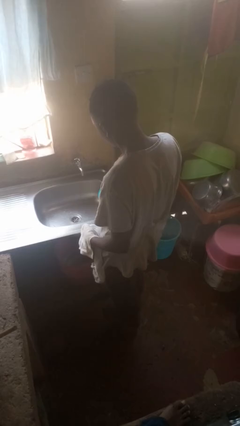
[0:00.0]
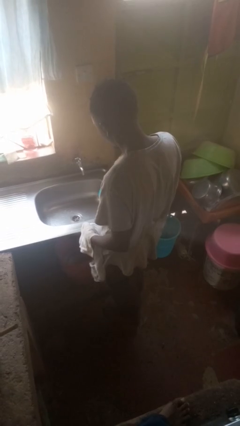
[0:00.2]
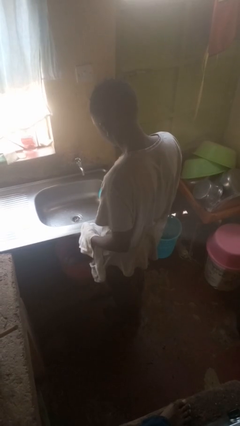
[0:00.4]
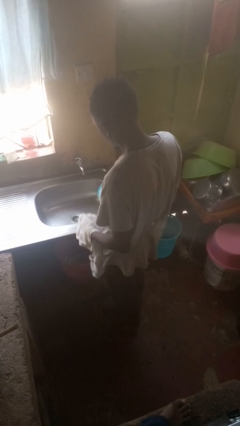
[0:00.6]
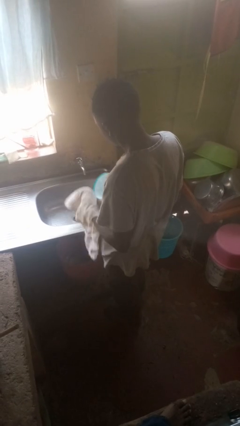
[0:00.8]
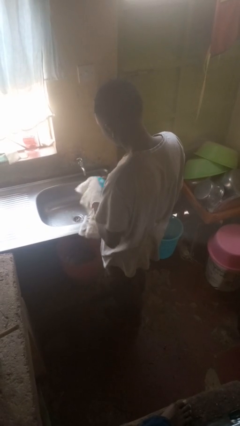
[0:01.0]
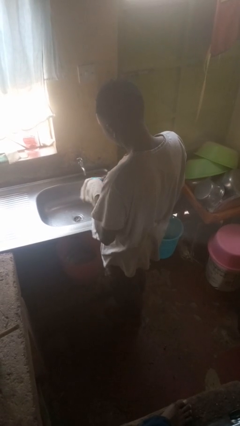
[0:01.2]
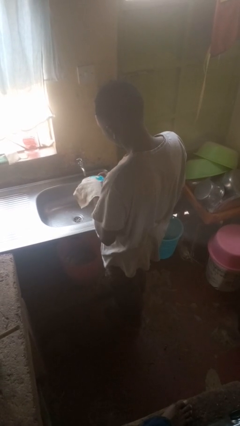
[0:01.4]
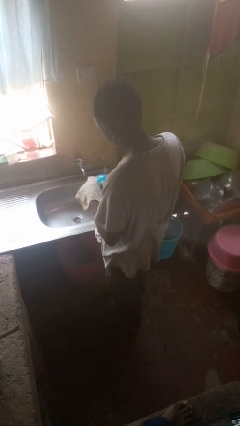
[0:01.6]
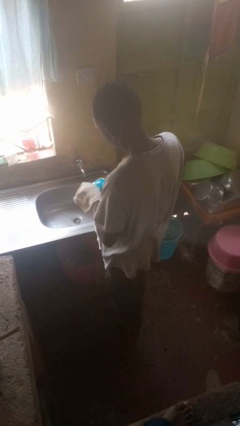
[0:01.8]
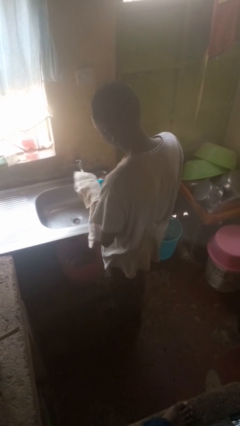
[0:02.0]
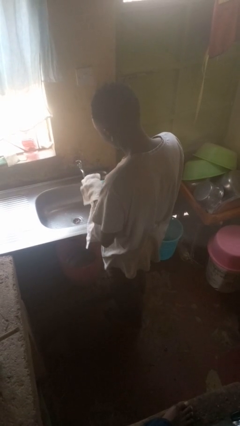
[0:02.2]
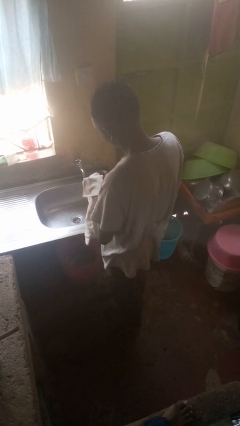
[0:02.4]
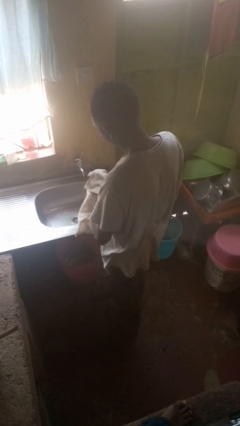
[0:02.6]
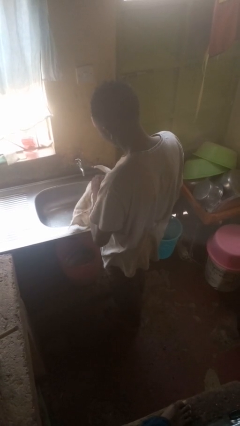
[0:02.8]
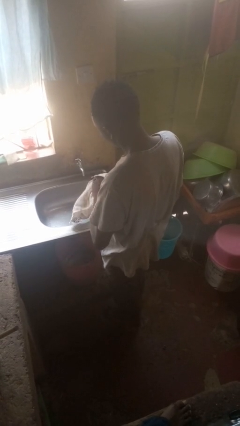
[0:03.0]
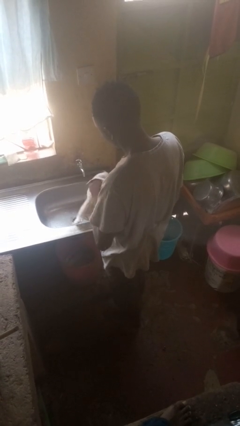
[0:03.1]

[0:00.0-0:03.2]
person dries dish

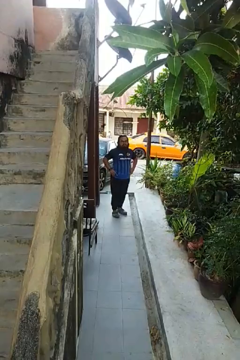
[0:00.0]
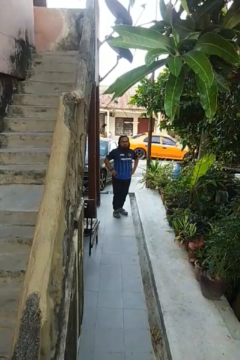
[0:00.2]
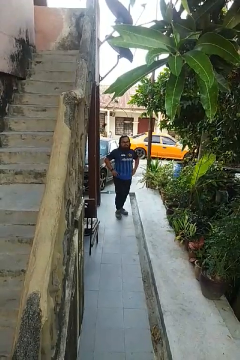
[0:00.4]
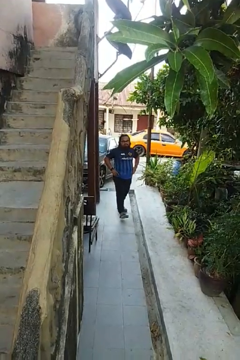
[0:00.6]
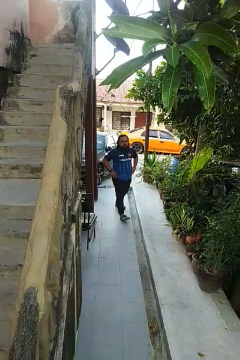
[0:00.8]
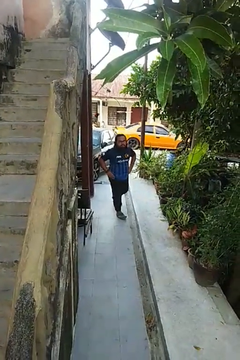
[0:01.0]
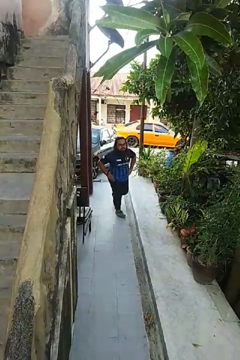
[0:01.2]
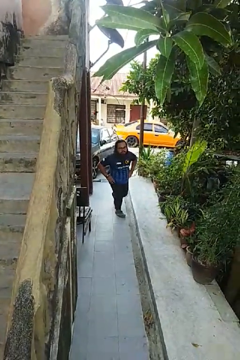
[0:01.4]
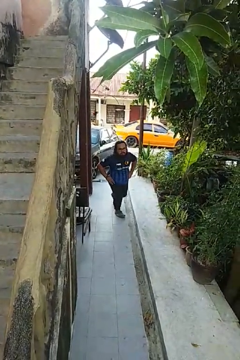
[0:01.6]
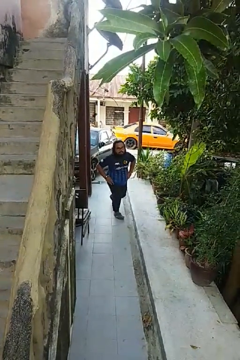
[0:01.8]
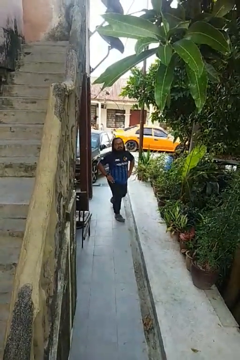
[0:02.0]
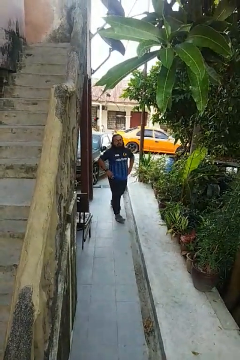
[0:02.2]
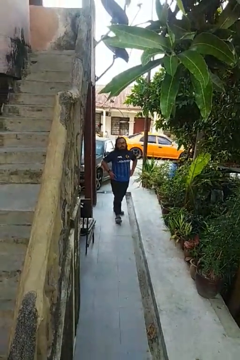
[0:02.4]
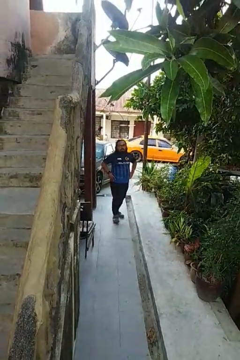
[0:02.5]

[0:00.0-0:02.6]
person exercises with lunges

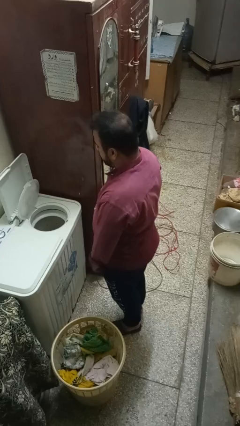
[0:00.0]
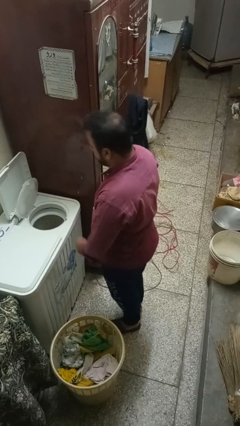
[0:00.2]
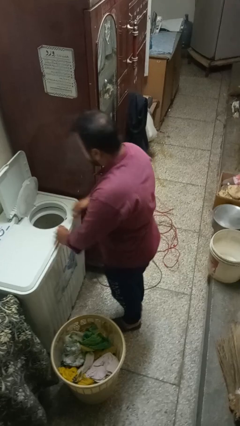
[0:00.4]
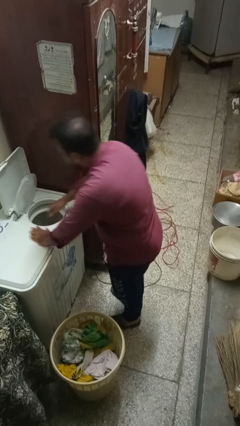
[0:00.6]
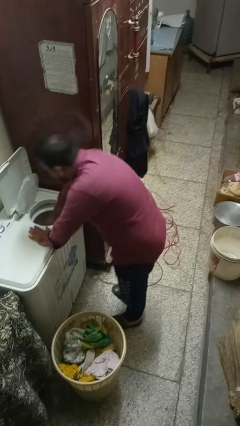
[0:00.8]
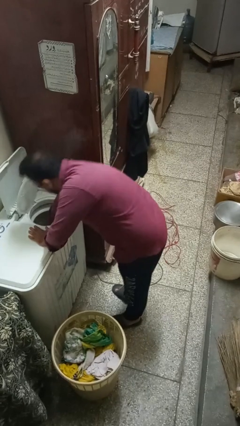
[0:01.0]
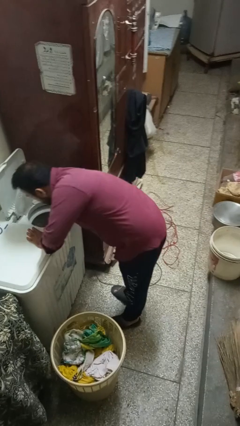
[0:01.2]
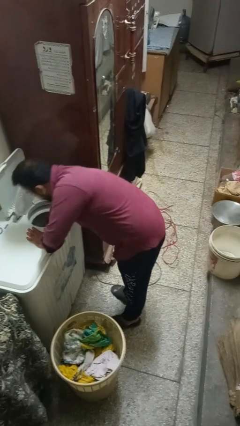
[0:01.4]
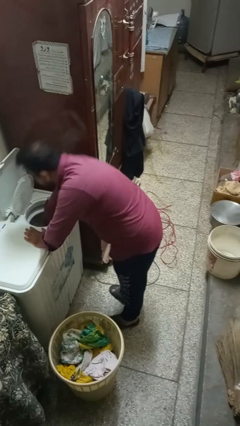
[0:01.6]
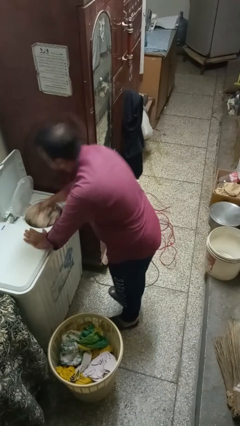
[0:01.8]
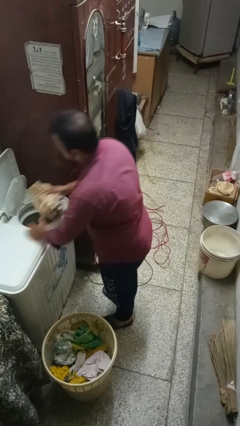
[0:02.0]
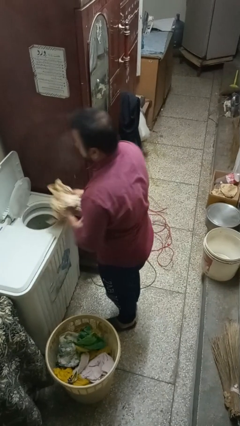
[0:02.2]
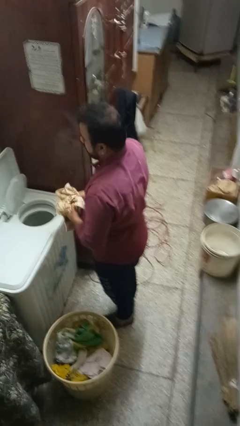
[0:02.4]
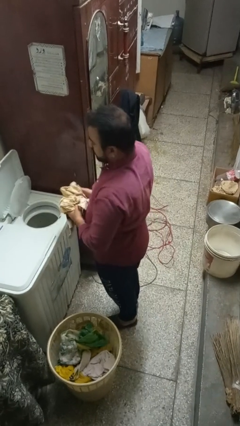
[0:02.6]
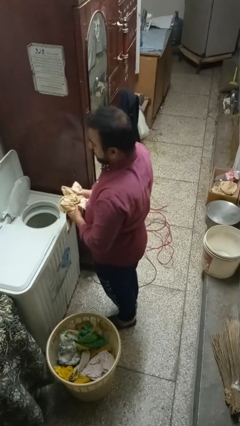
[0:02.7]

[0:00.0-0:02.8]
person unloads dryer

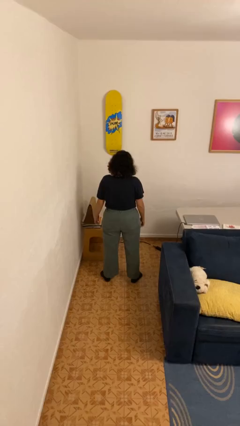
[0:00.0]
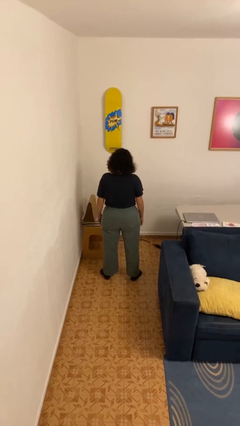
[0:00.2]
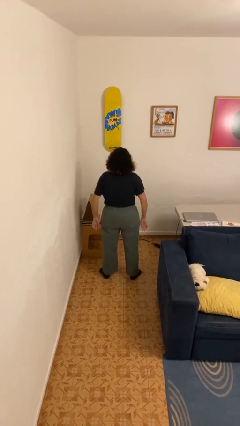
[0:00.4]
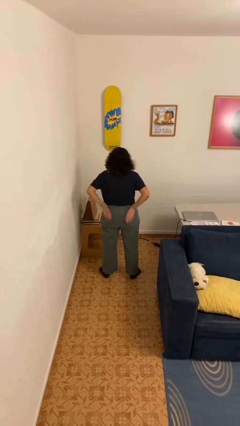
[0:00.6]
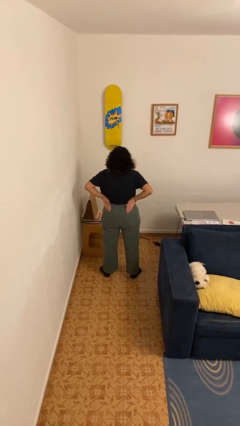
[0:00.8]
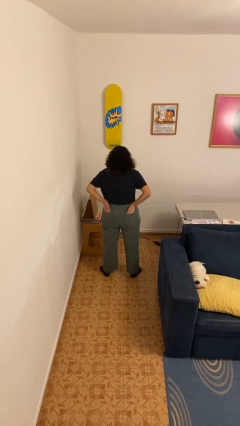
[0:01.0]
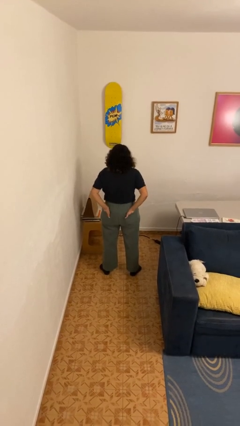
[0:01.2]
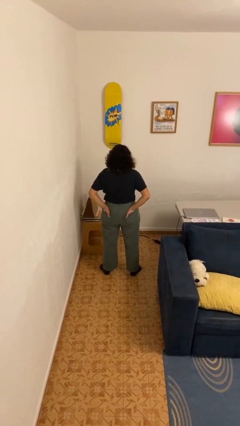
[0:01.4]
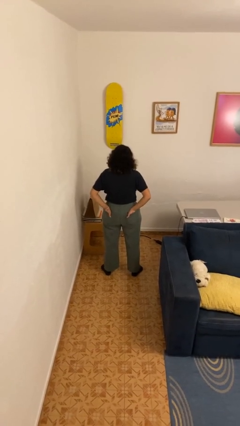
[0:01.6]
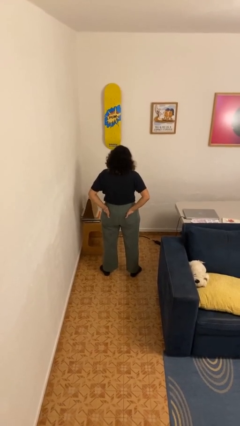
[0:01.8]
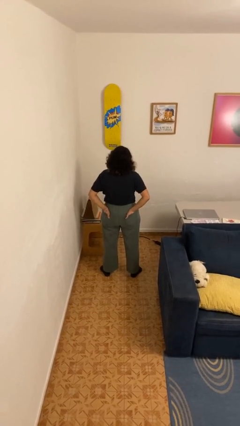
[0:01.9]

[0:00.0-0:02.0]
person puts hands in back pockets

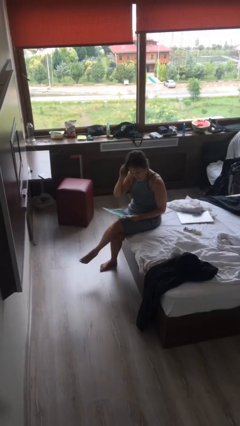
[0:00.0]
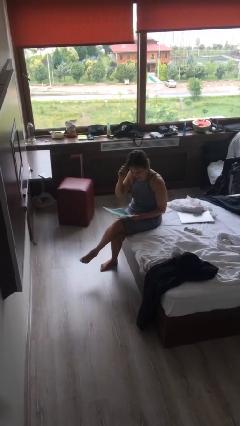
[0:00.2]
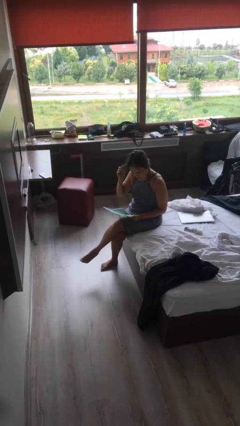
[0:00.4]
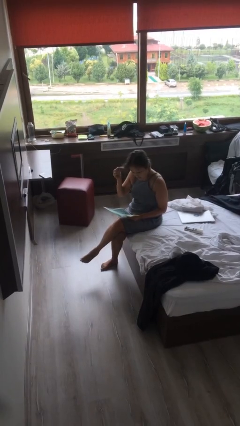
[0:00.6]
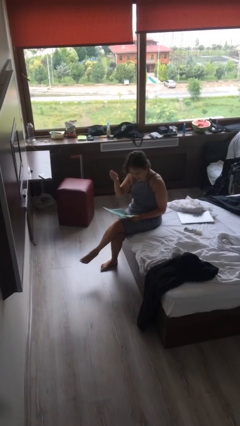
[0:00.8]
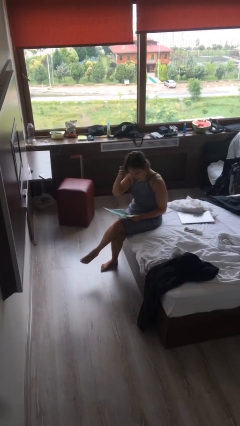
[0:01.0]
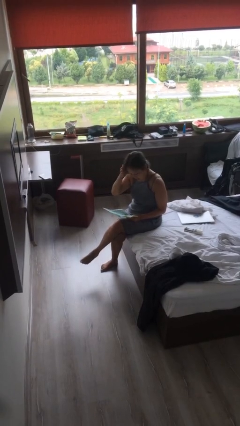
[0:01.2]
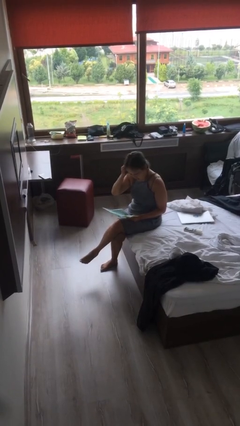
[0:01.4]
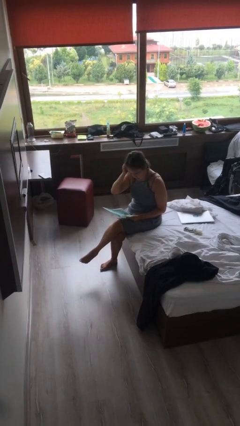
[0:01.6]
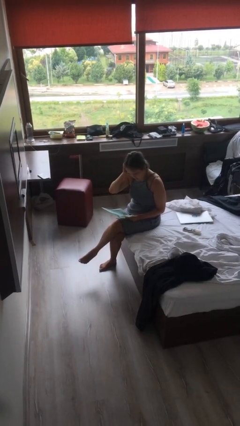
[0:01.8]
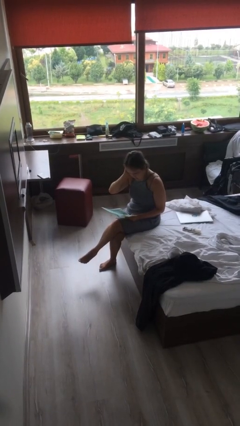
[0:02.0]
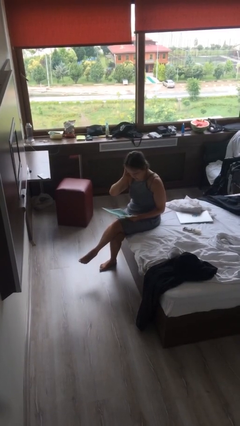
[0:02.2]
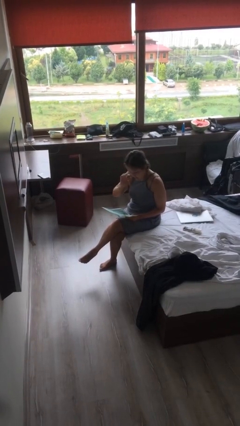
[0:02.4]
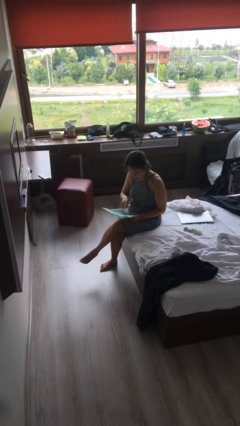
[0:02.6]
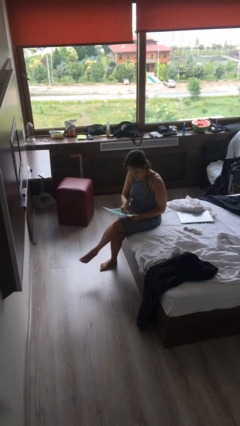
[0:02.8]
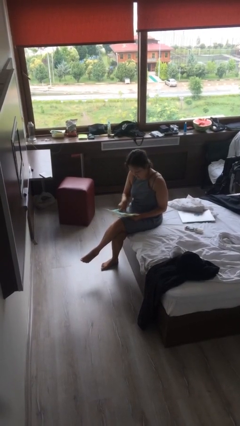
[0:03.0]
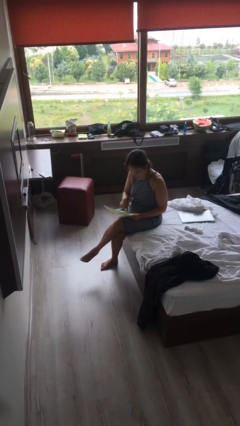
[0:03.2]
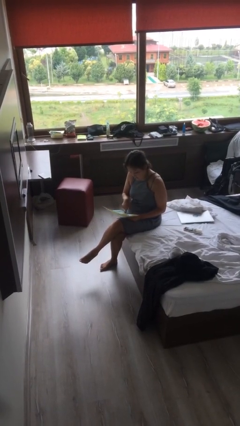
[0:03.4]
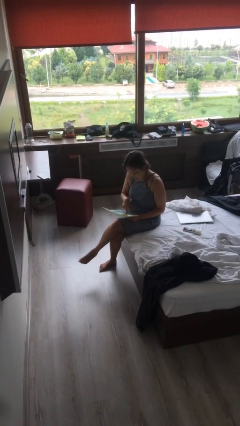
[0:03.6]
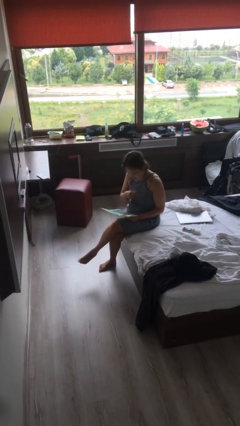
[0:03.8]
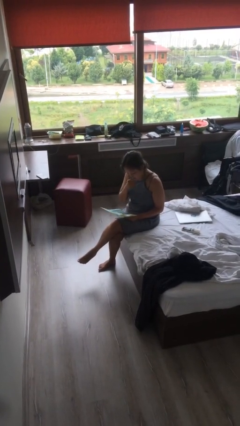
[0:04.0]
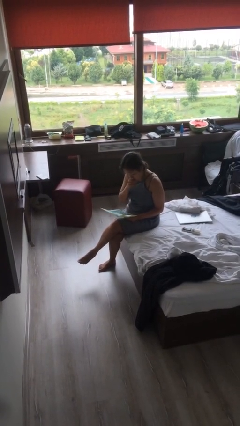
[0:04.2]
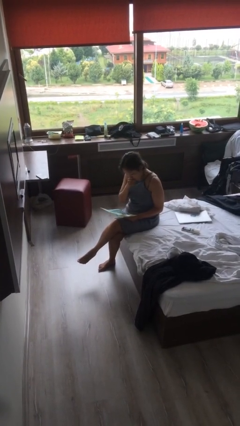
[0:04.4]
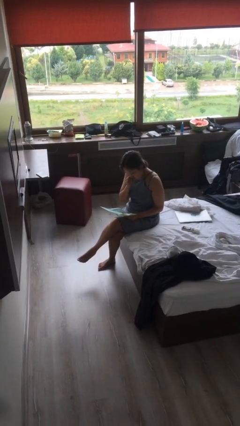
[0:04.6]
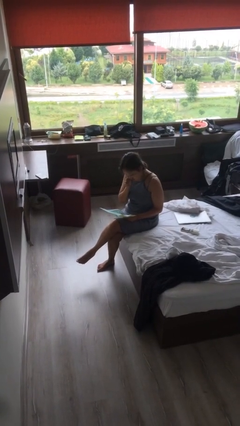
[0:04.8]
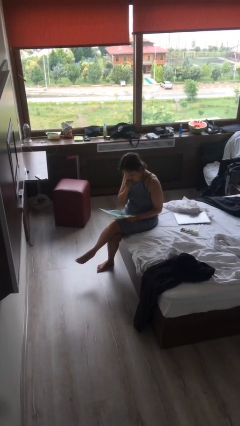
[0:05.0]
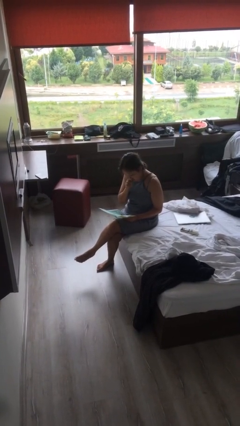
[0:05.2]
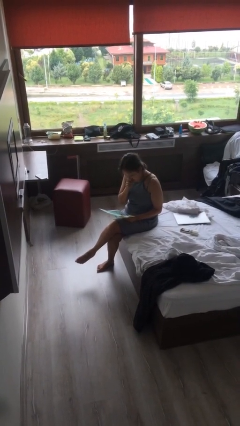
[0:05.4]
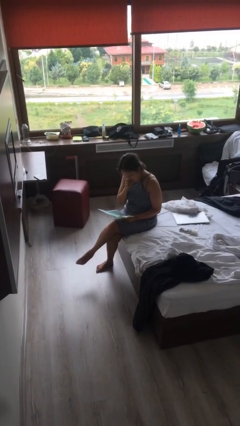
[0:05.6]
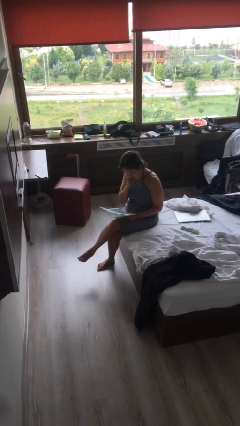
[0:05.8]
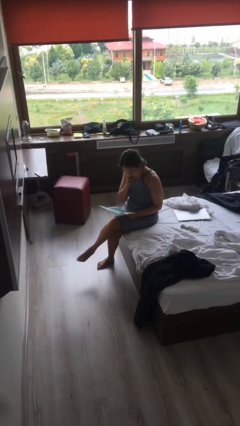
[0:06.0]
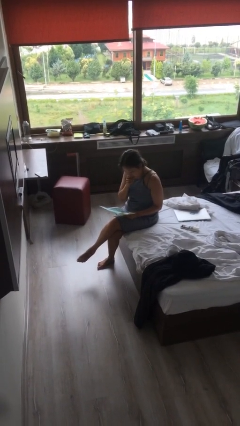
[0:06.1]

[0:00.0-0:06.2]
person reads document

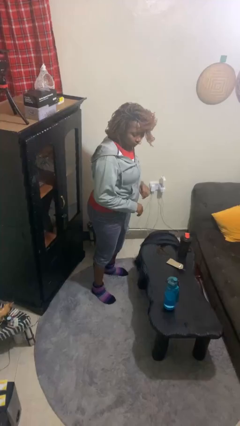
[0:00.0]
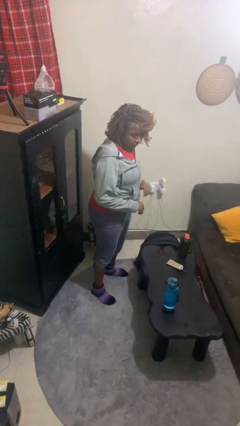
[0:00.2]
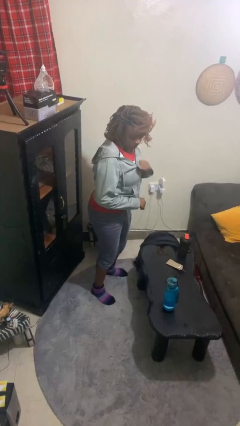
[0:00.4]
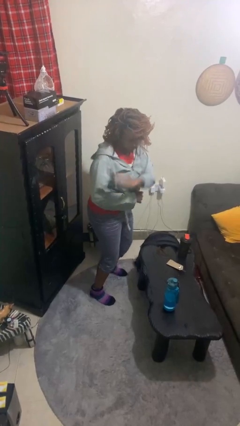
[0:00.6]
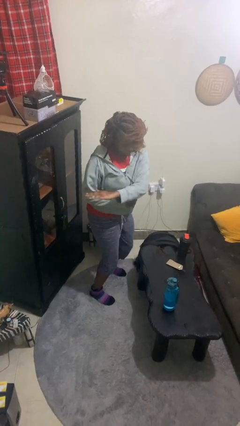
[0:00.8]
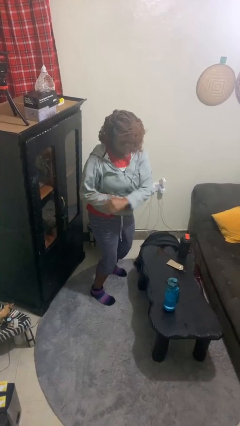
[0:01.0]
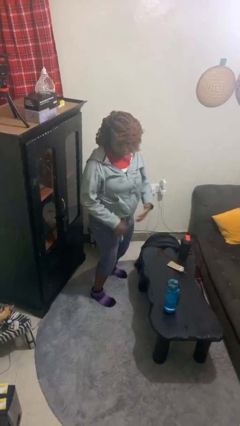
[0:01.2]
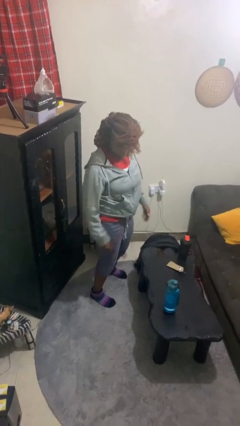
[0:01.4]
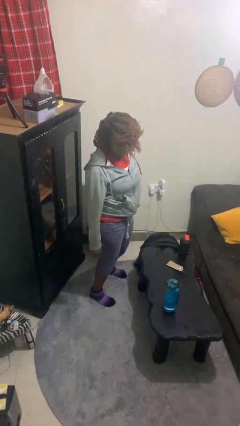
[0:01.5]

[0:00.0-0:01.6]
person karate chop
